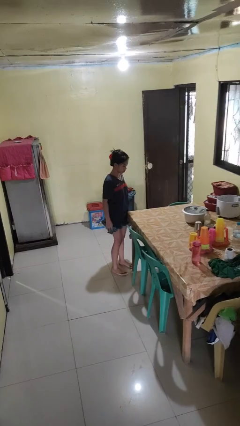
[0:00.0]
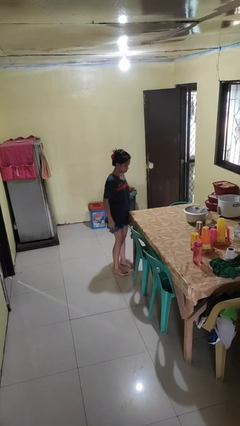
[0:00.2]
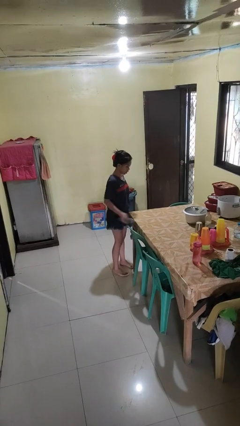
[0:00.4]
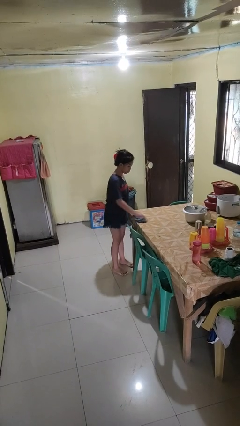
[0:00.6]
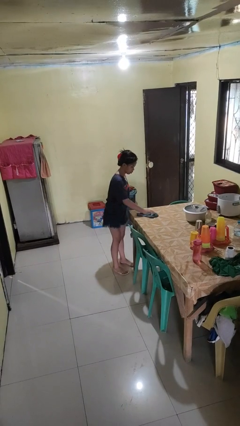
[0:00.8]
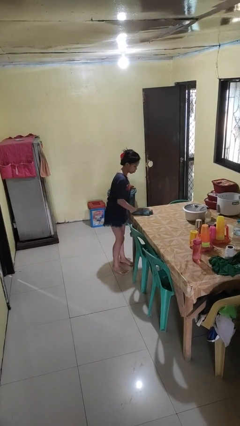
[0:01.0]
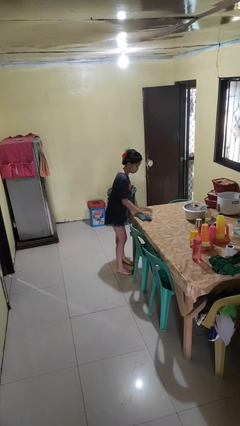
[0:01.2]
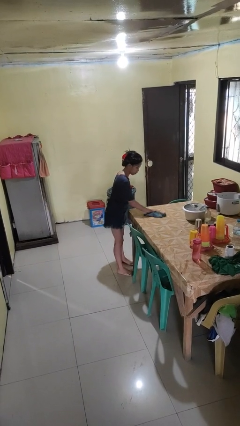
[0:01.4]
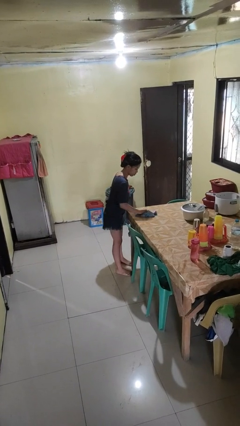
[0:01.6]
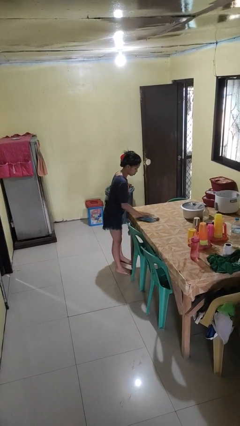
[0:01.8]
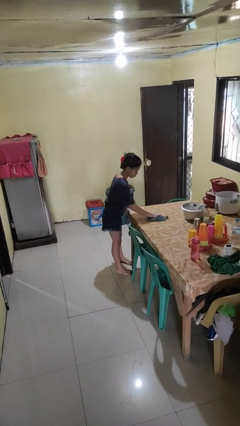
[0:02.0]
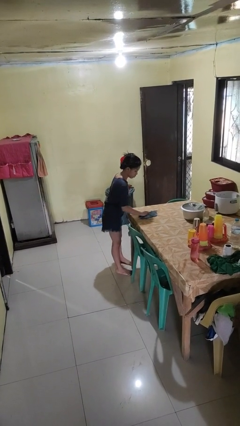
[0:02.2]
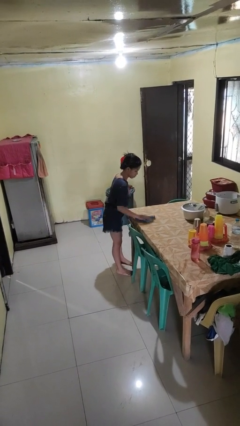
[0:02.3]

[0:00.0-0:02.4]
person cleans table with rag

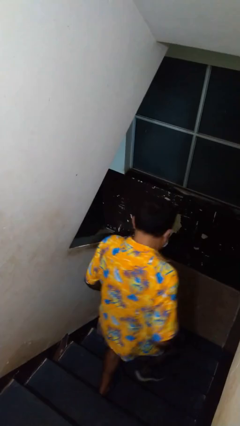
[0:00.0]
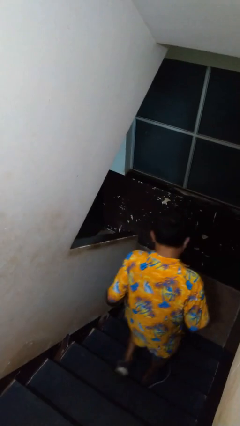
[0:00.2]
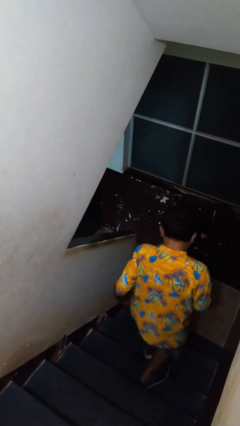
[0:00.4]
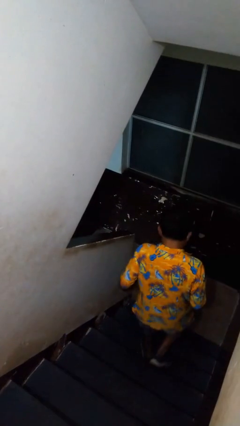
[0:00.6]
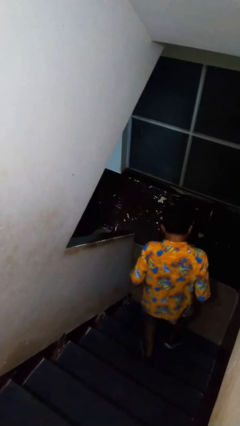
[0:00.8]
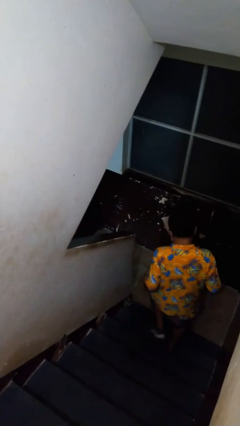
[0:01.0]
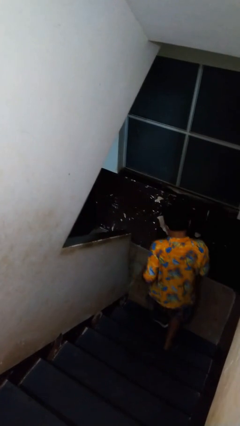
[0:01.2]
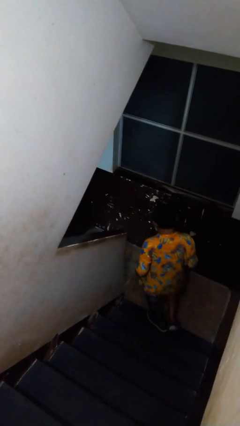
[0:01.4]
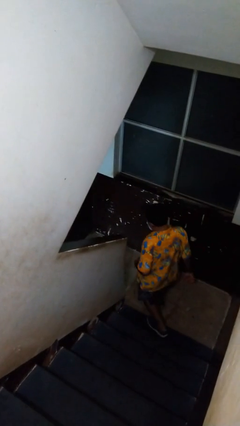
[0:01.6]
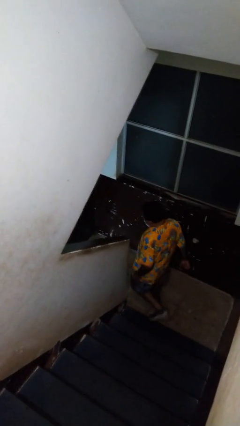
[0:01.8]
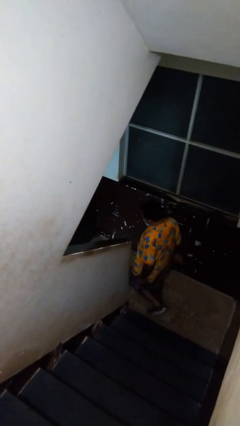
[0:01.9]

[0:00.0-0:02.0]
person climbs down stairs

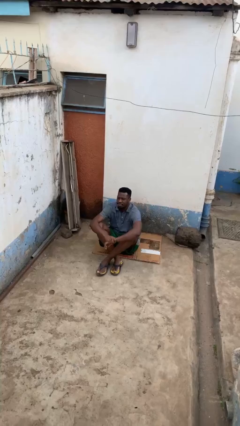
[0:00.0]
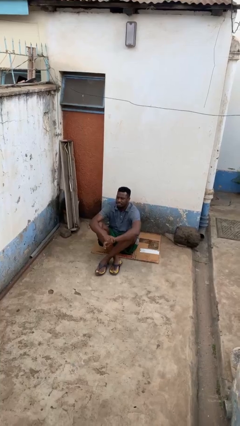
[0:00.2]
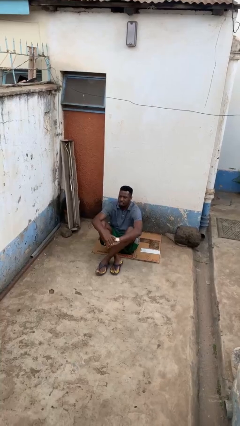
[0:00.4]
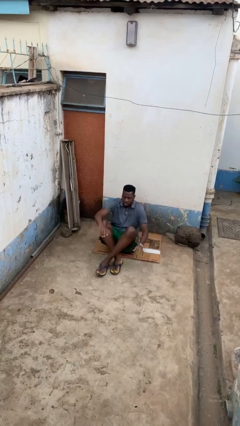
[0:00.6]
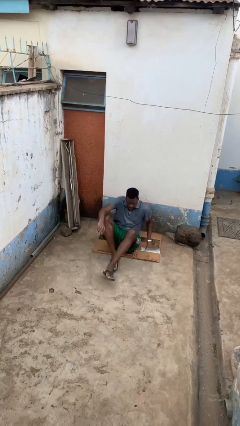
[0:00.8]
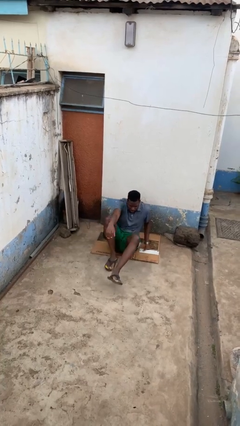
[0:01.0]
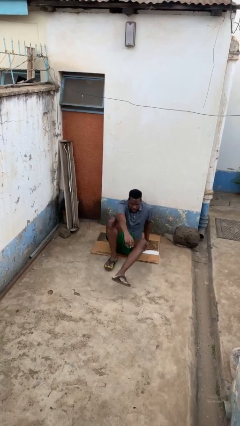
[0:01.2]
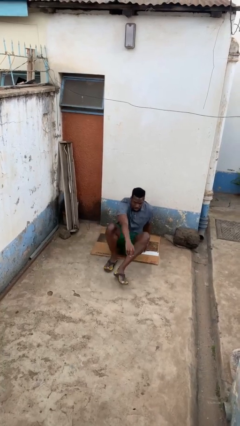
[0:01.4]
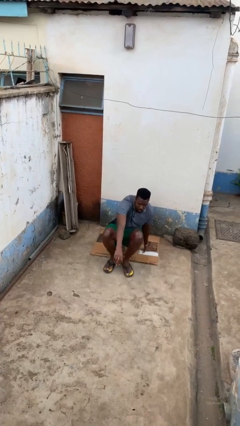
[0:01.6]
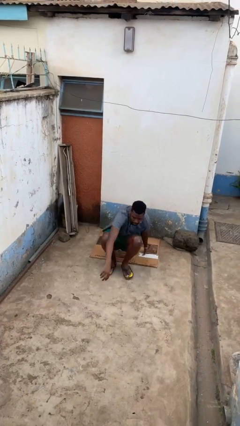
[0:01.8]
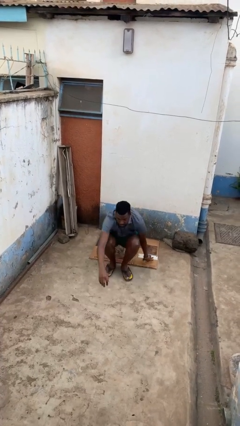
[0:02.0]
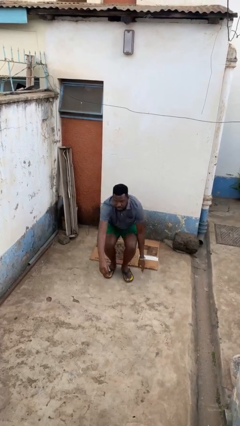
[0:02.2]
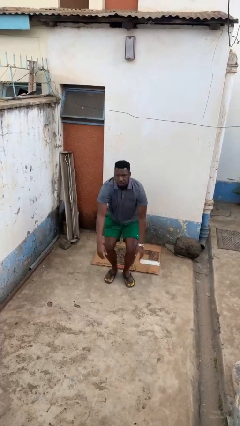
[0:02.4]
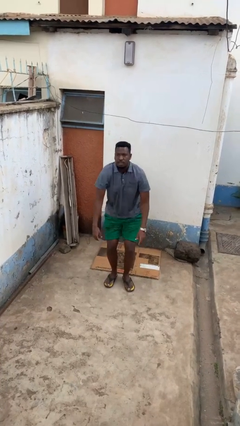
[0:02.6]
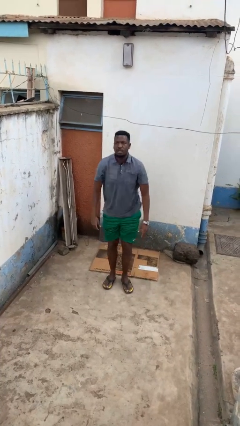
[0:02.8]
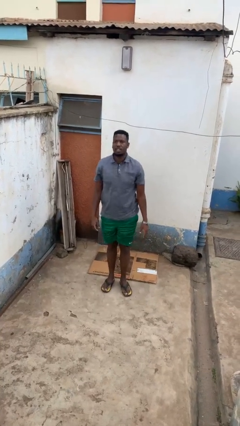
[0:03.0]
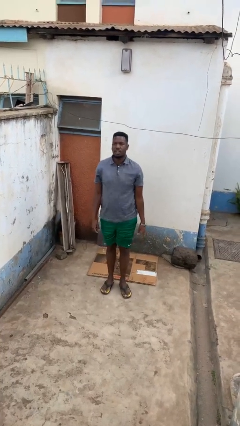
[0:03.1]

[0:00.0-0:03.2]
person stands up from floor

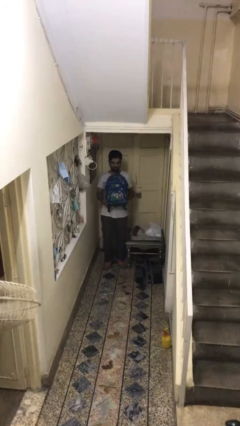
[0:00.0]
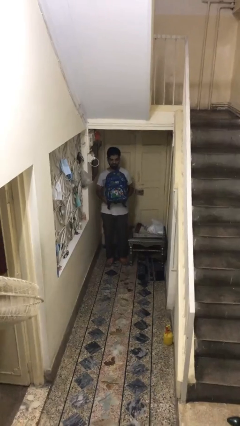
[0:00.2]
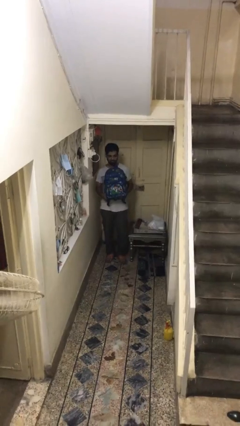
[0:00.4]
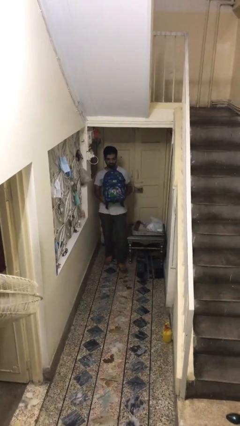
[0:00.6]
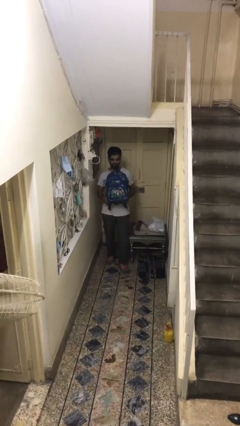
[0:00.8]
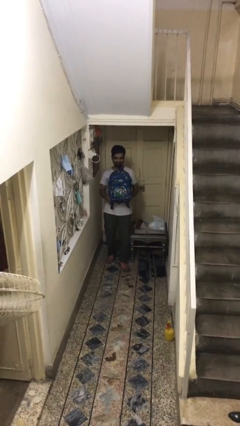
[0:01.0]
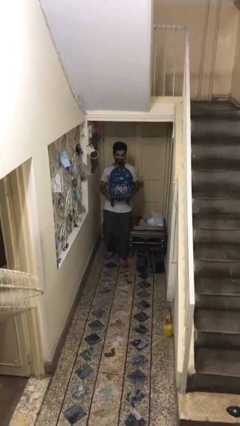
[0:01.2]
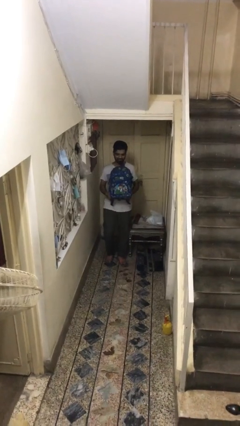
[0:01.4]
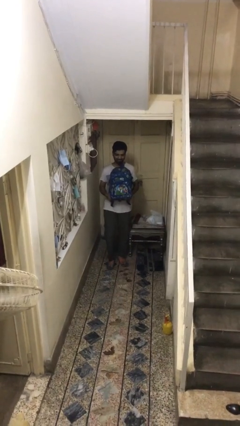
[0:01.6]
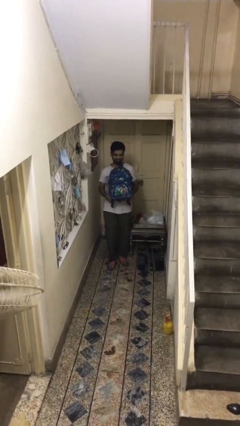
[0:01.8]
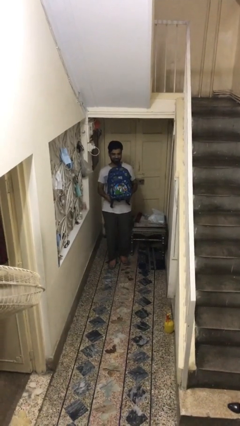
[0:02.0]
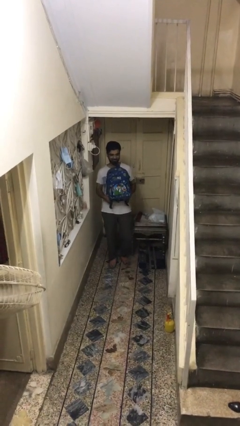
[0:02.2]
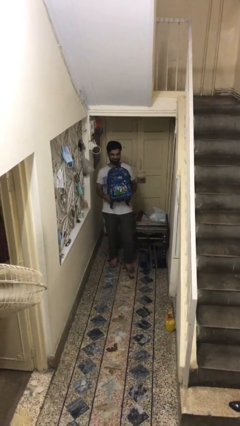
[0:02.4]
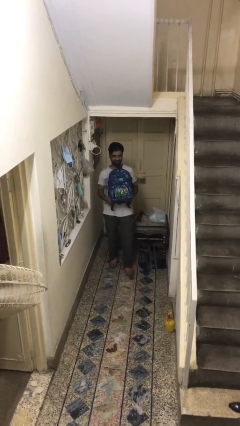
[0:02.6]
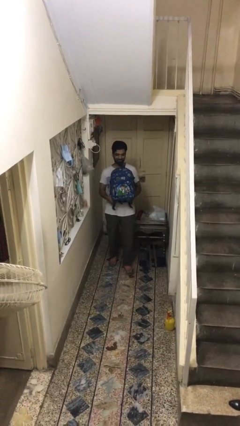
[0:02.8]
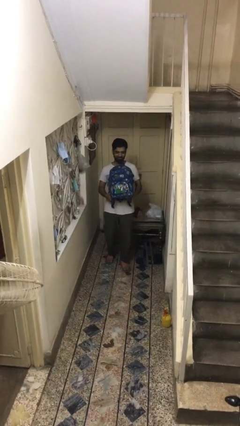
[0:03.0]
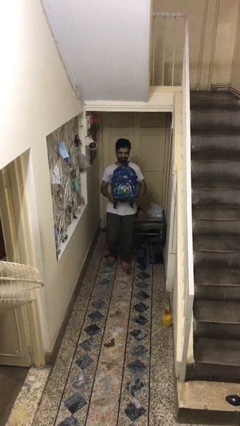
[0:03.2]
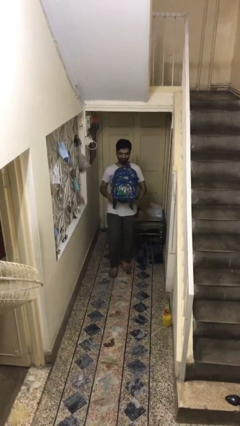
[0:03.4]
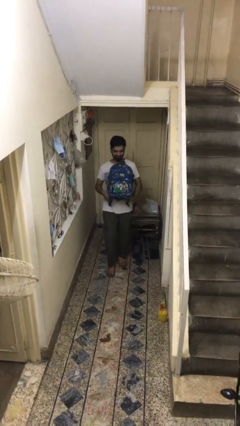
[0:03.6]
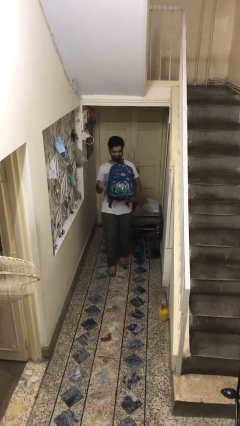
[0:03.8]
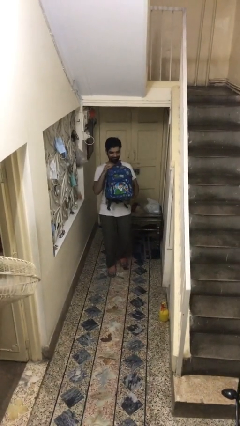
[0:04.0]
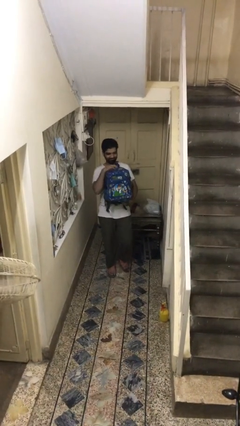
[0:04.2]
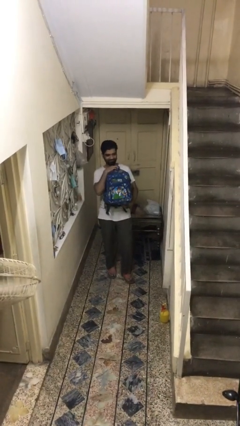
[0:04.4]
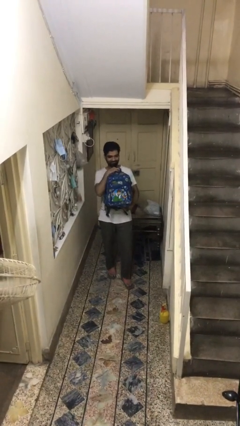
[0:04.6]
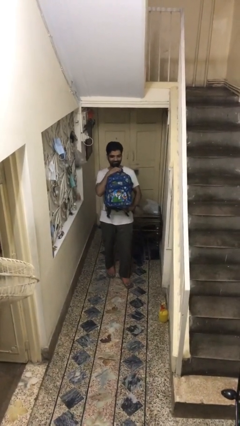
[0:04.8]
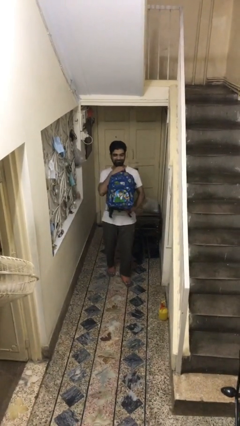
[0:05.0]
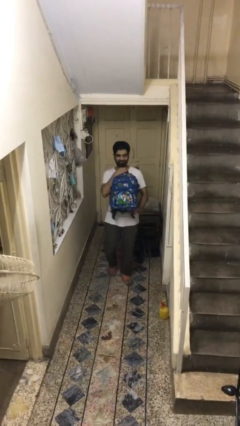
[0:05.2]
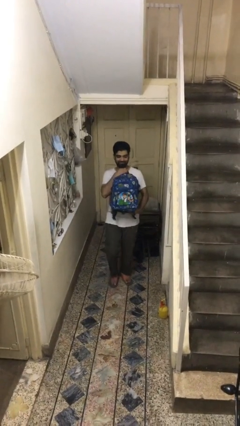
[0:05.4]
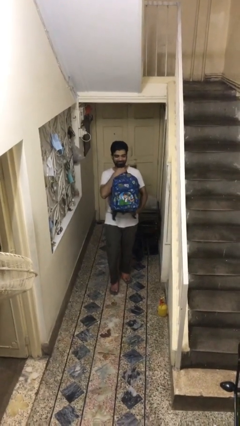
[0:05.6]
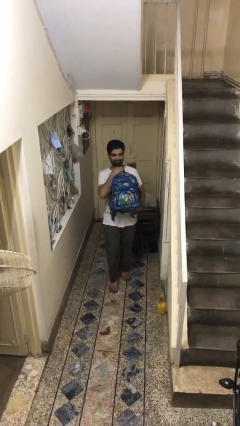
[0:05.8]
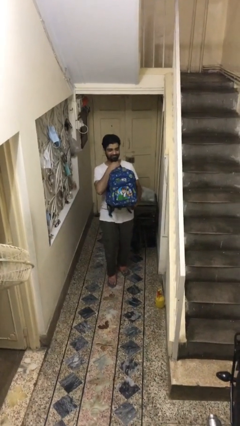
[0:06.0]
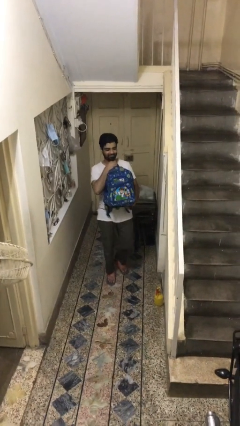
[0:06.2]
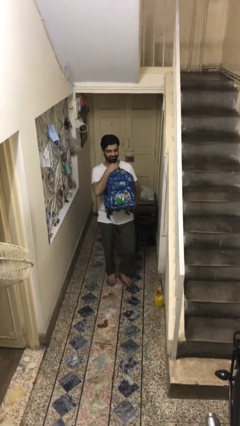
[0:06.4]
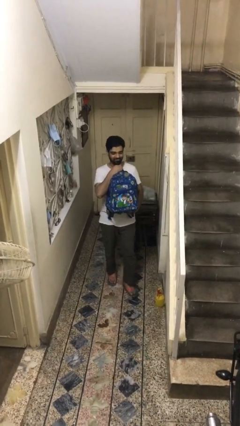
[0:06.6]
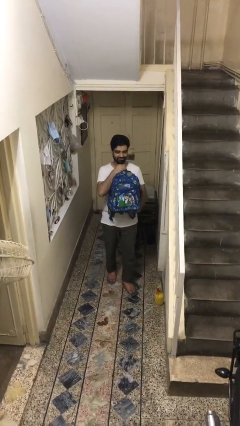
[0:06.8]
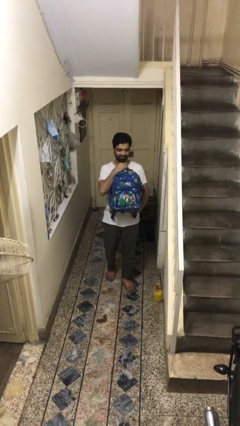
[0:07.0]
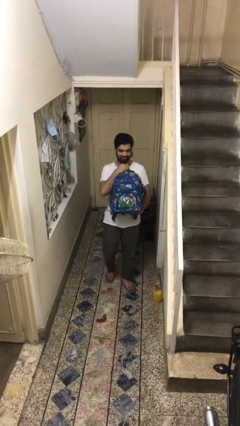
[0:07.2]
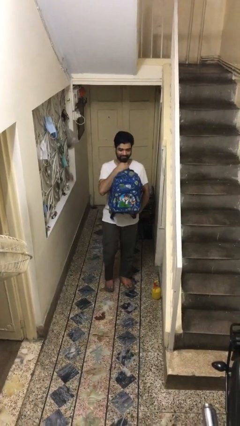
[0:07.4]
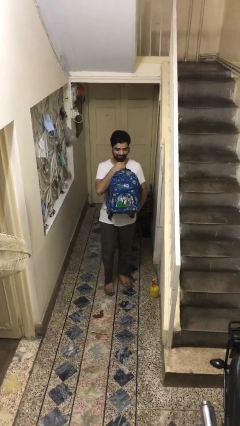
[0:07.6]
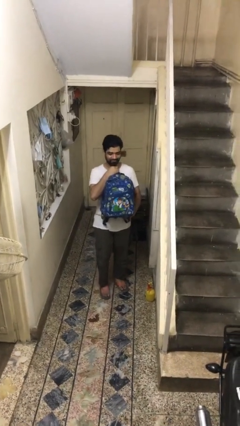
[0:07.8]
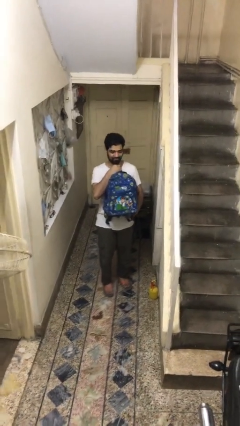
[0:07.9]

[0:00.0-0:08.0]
person carries heavy object

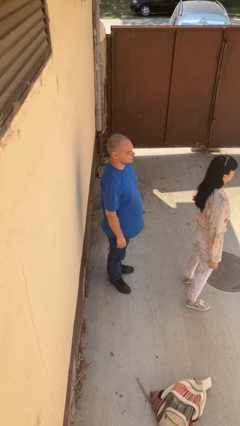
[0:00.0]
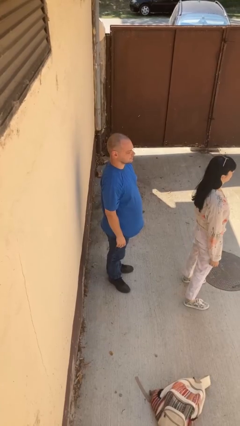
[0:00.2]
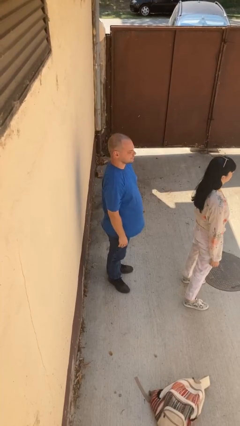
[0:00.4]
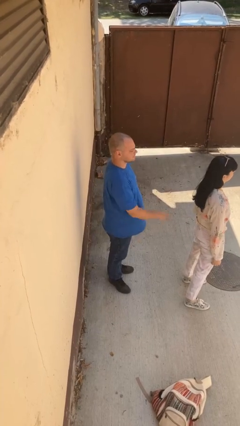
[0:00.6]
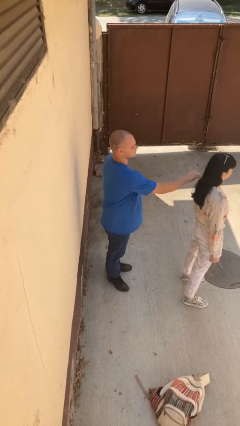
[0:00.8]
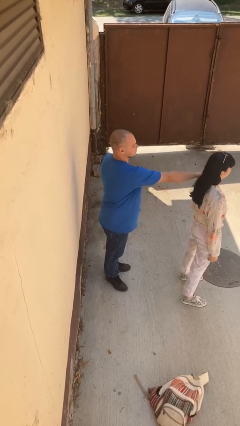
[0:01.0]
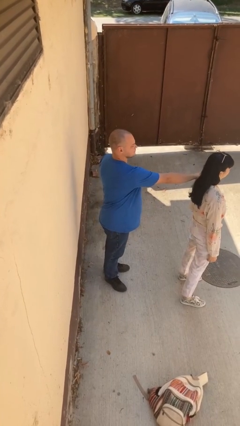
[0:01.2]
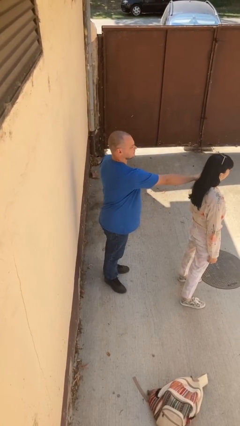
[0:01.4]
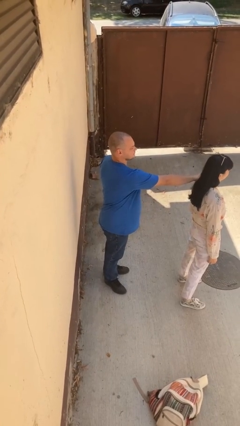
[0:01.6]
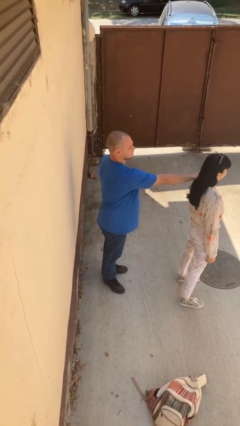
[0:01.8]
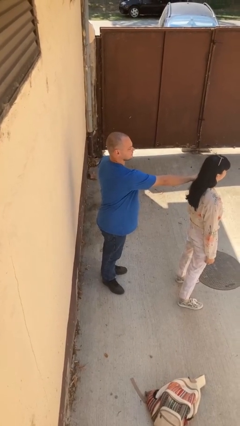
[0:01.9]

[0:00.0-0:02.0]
person grabs person by shoulder
